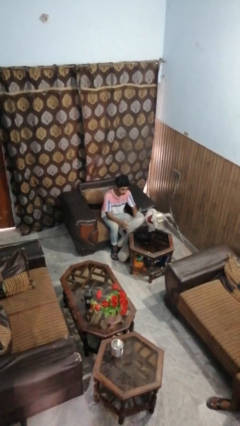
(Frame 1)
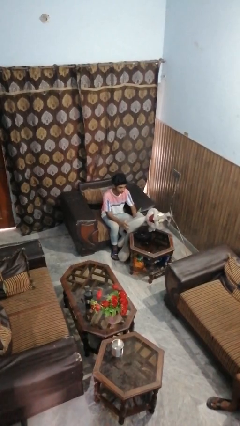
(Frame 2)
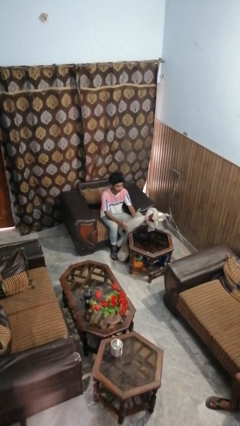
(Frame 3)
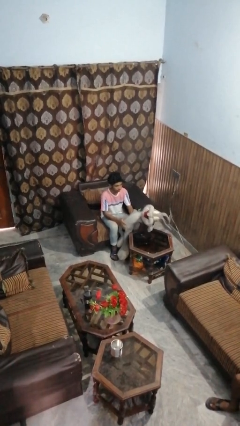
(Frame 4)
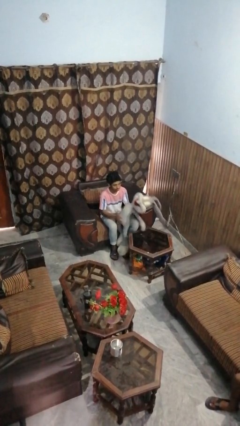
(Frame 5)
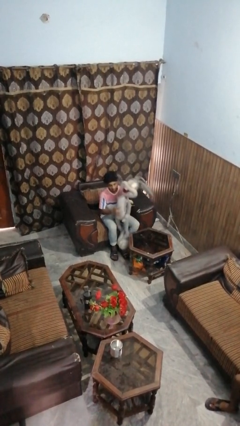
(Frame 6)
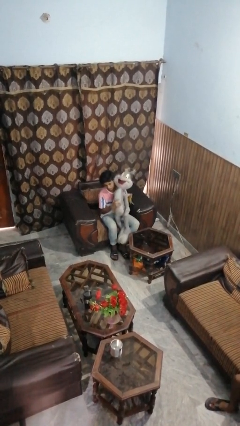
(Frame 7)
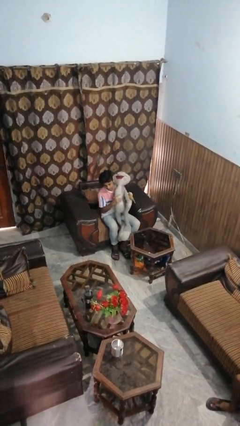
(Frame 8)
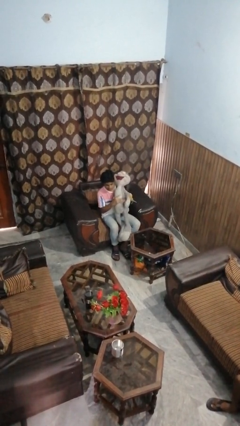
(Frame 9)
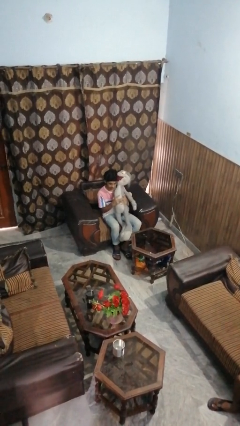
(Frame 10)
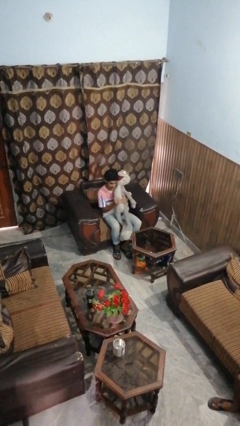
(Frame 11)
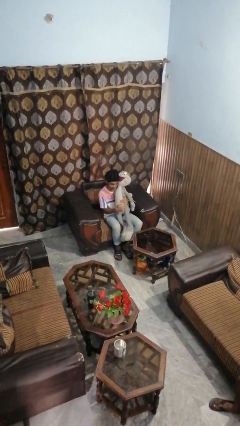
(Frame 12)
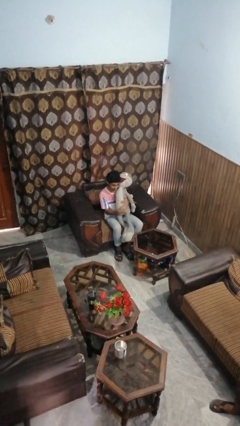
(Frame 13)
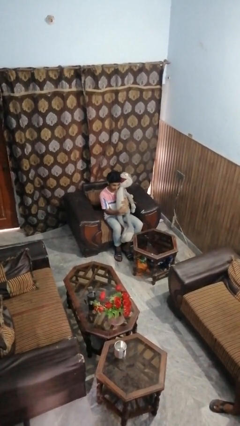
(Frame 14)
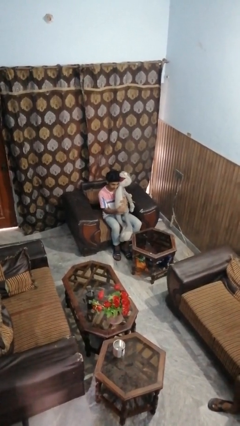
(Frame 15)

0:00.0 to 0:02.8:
person hugs stuffed animal

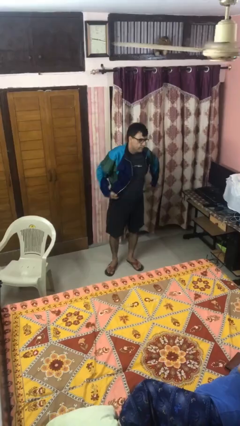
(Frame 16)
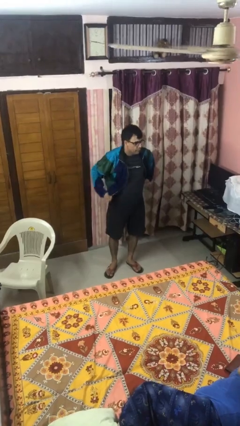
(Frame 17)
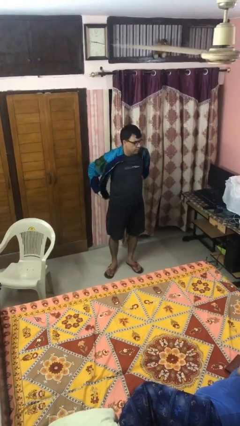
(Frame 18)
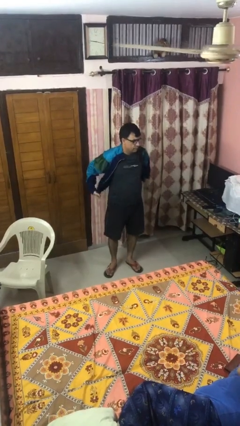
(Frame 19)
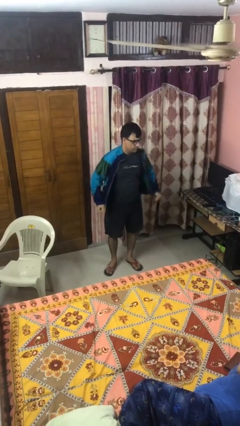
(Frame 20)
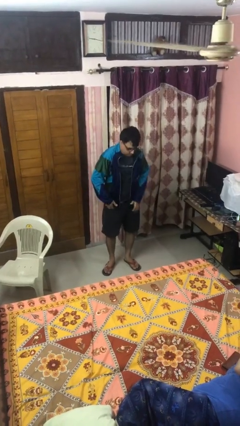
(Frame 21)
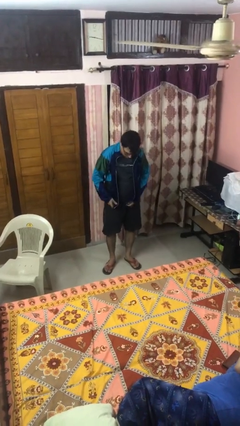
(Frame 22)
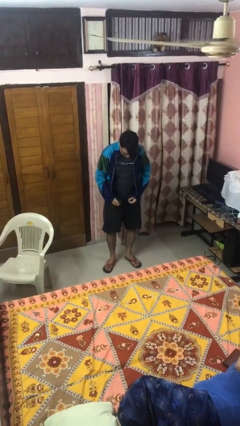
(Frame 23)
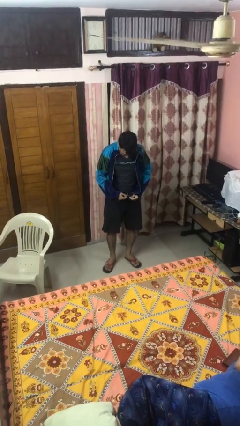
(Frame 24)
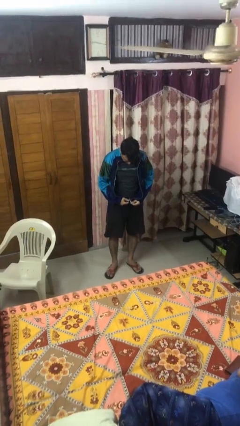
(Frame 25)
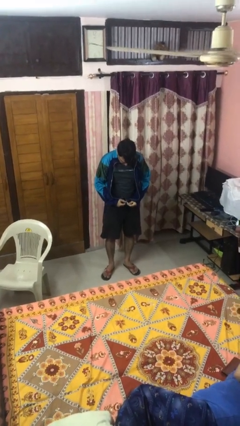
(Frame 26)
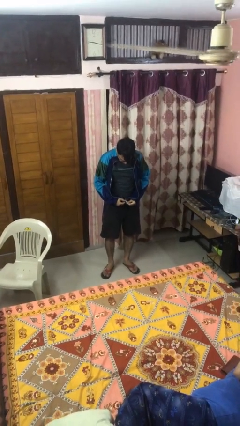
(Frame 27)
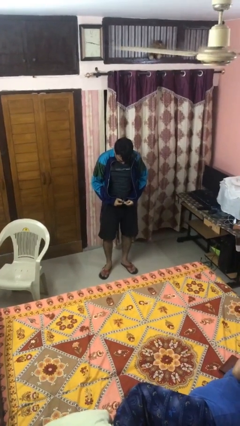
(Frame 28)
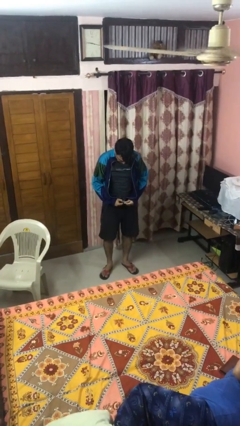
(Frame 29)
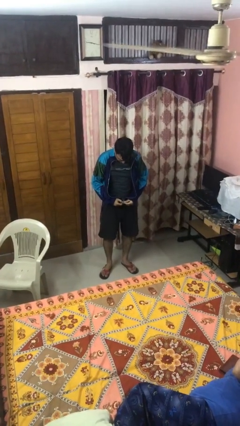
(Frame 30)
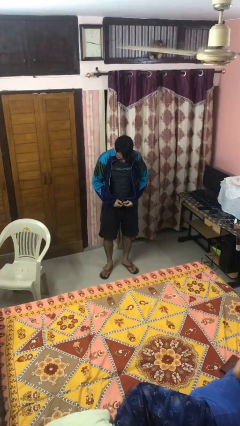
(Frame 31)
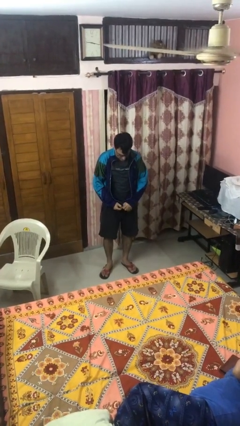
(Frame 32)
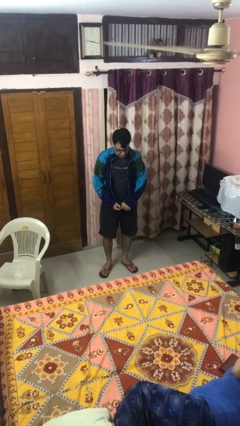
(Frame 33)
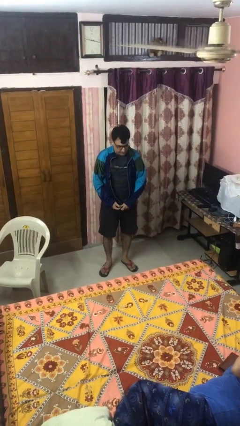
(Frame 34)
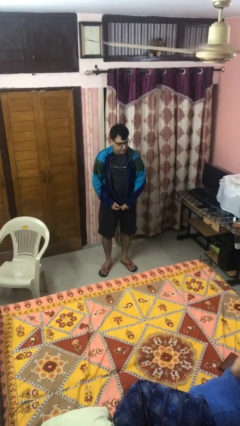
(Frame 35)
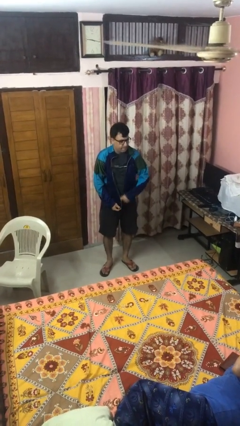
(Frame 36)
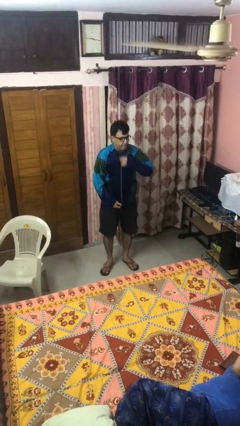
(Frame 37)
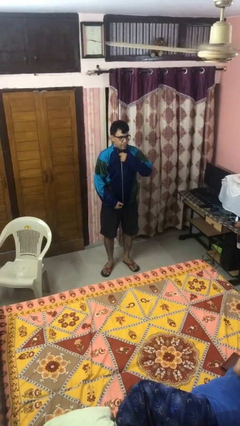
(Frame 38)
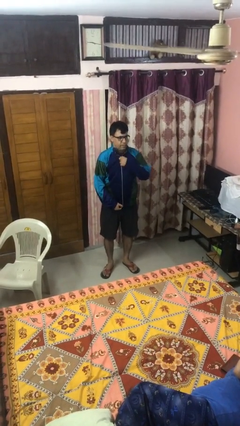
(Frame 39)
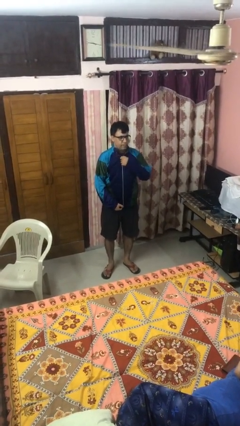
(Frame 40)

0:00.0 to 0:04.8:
person zips up jacket

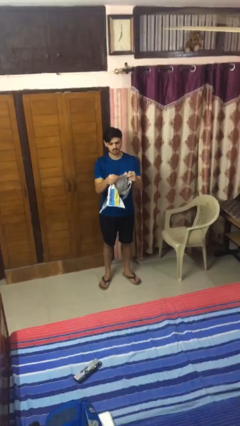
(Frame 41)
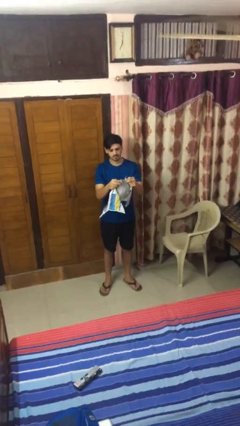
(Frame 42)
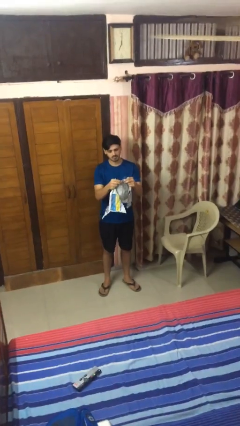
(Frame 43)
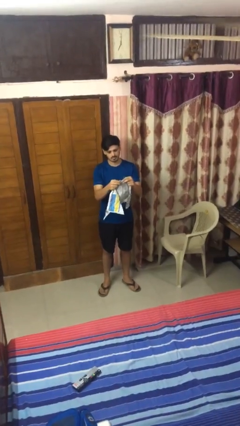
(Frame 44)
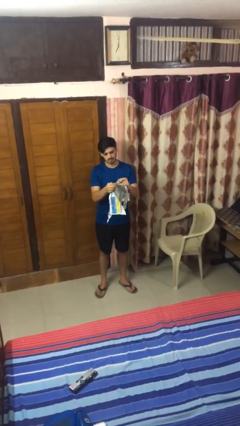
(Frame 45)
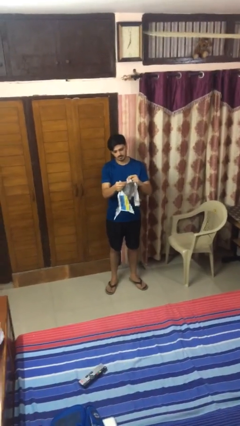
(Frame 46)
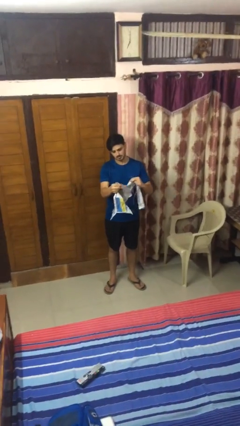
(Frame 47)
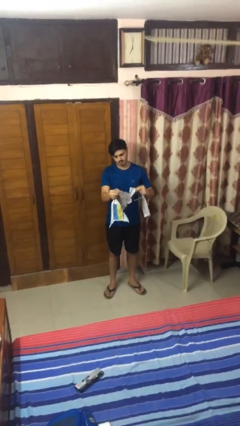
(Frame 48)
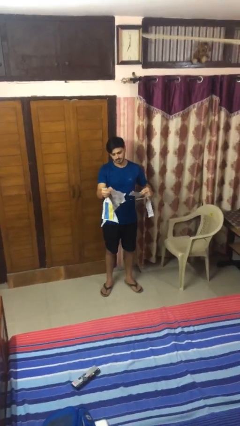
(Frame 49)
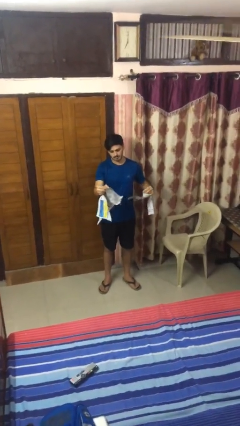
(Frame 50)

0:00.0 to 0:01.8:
person tears paper

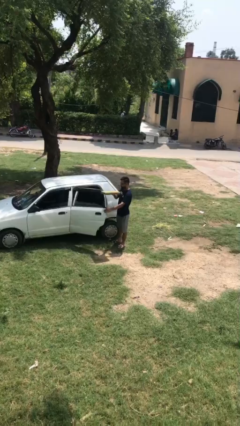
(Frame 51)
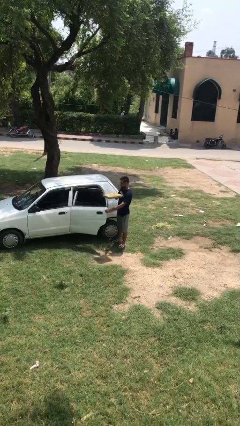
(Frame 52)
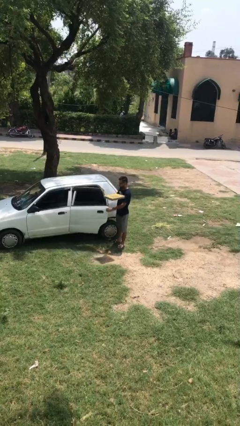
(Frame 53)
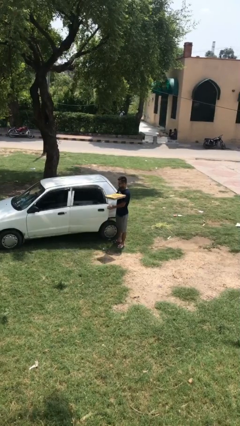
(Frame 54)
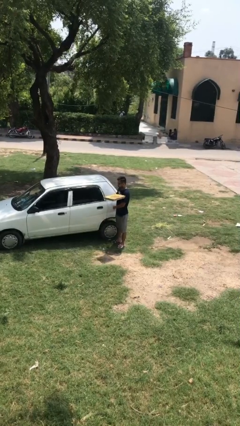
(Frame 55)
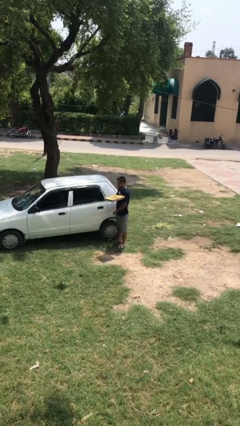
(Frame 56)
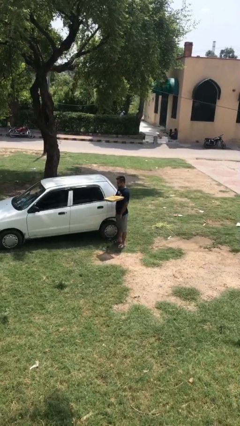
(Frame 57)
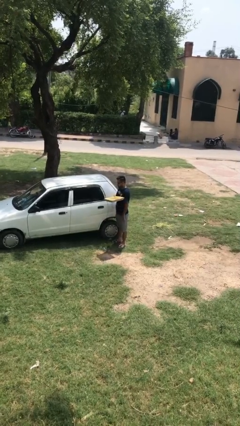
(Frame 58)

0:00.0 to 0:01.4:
person closes car door

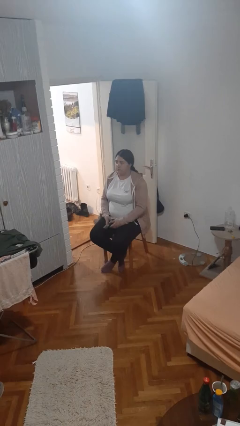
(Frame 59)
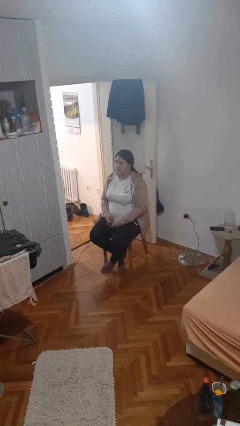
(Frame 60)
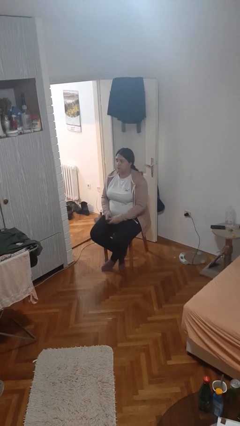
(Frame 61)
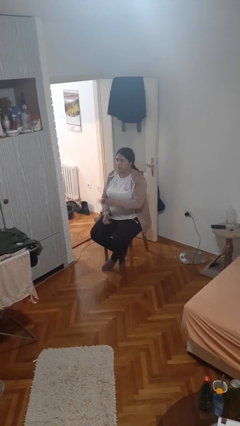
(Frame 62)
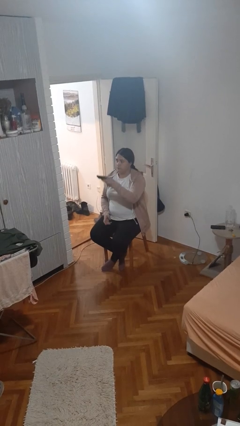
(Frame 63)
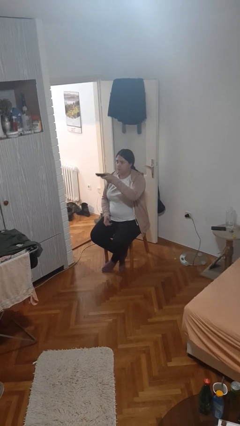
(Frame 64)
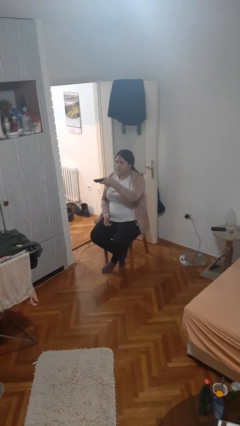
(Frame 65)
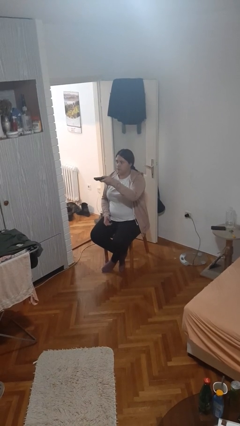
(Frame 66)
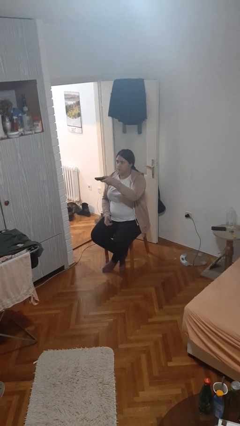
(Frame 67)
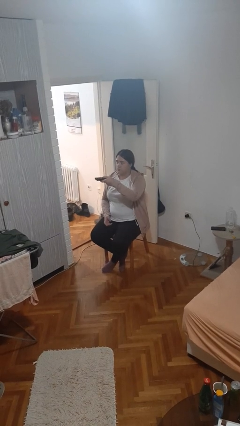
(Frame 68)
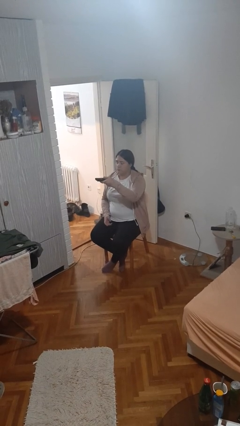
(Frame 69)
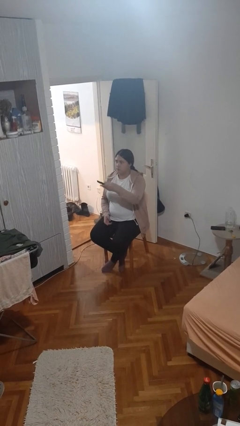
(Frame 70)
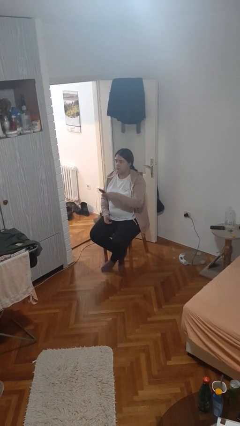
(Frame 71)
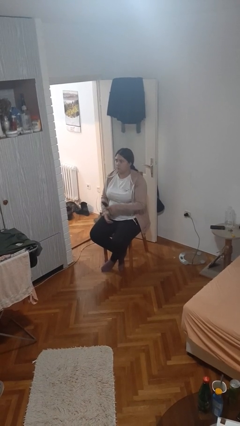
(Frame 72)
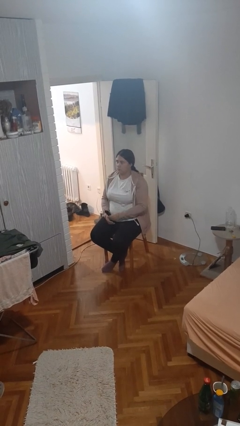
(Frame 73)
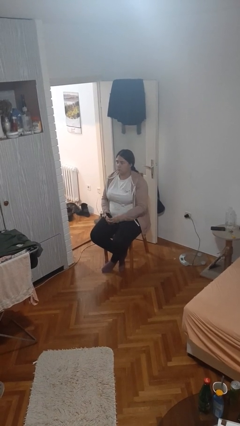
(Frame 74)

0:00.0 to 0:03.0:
person uses television remote

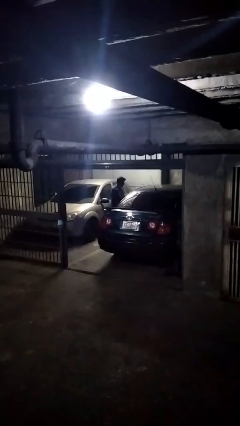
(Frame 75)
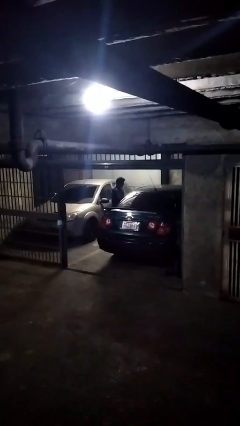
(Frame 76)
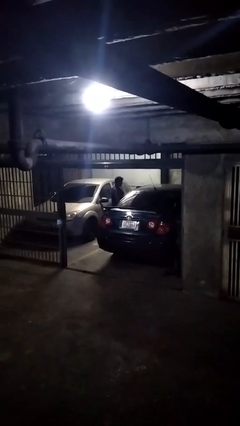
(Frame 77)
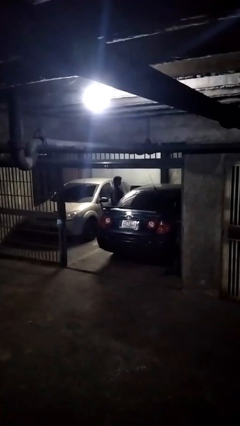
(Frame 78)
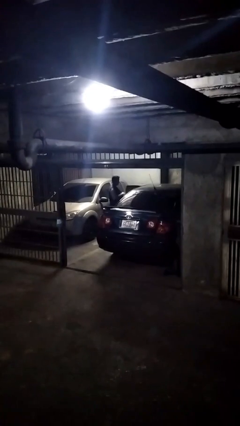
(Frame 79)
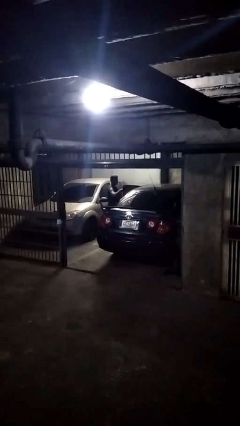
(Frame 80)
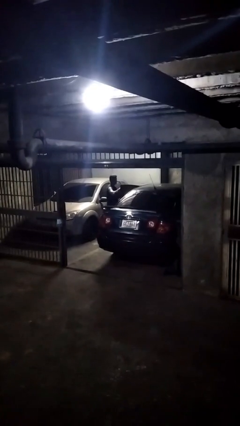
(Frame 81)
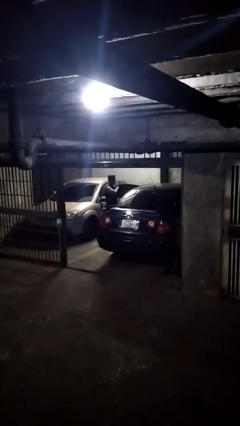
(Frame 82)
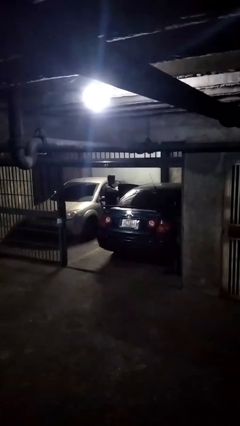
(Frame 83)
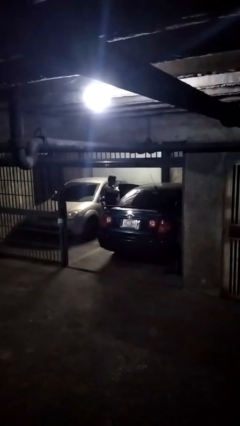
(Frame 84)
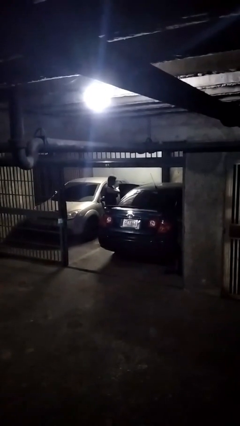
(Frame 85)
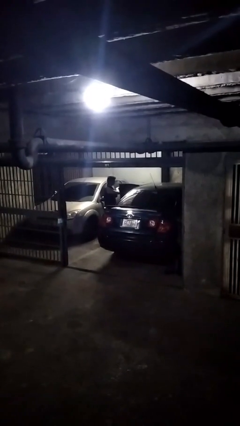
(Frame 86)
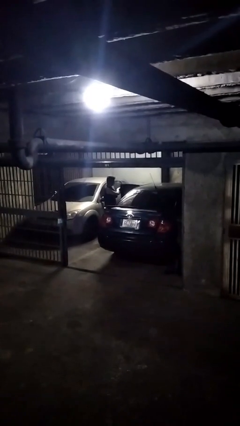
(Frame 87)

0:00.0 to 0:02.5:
person opens car door

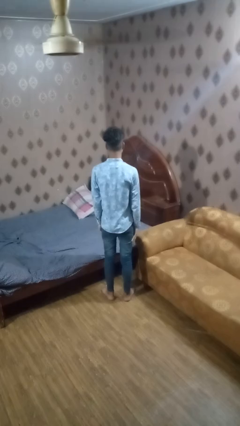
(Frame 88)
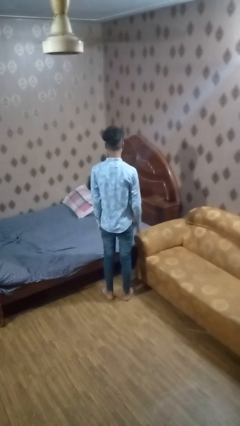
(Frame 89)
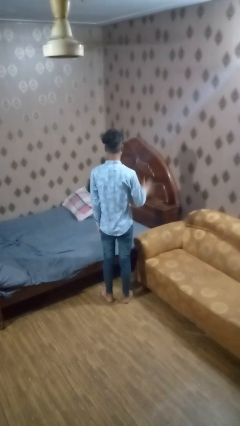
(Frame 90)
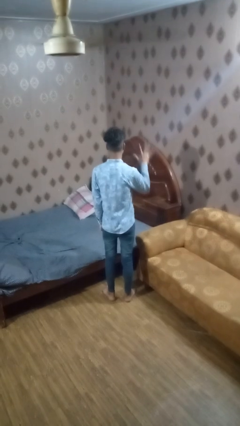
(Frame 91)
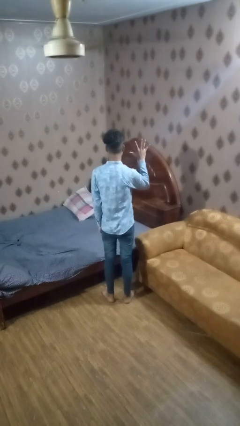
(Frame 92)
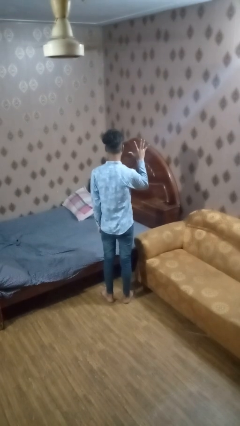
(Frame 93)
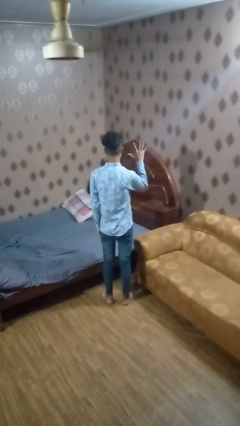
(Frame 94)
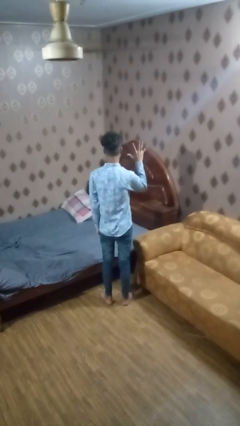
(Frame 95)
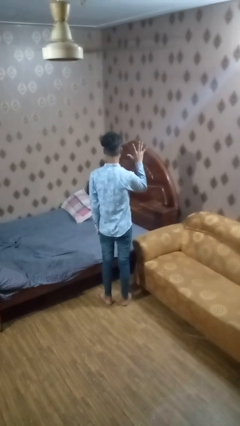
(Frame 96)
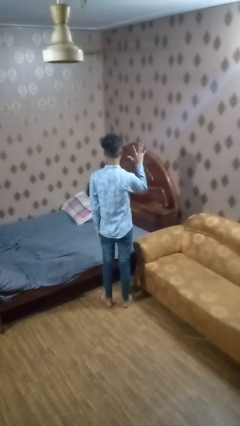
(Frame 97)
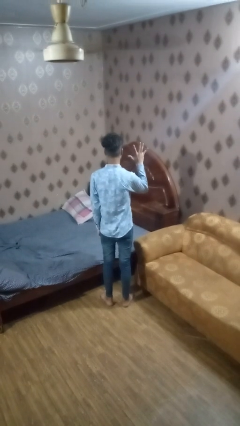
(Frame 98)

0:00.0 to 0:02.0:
person gestures number five
